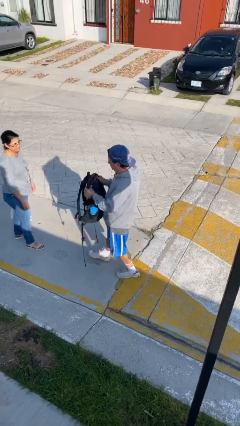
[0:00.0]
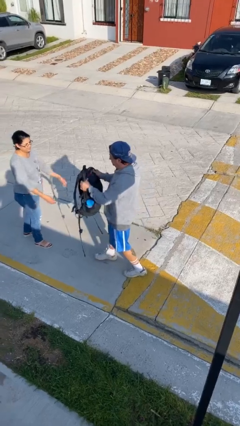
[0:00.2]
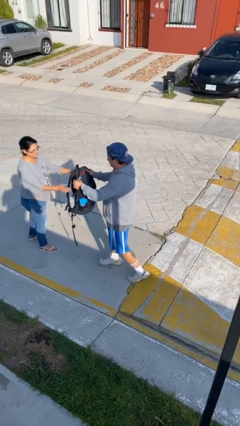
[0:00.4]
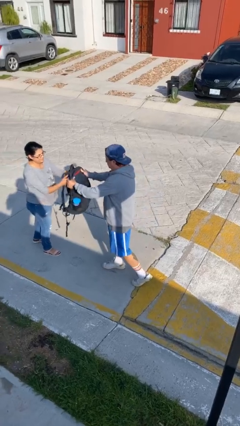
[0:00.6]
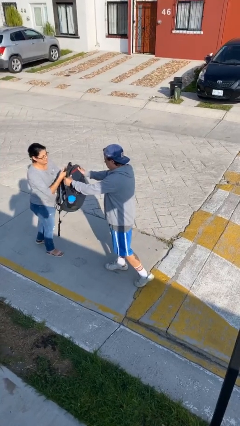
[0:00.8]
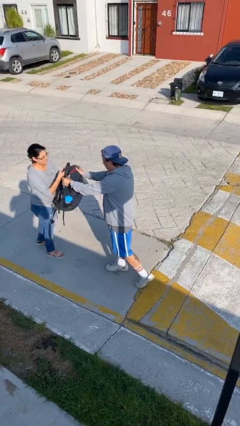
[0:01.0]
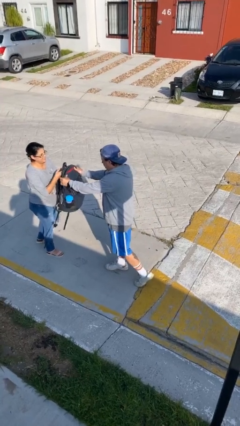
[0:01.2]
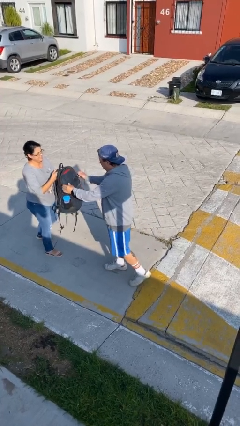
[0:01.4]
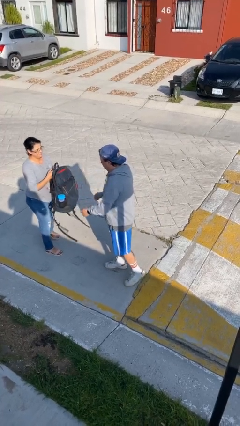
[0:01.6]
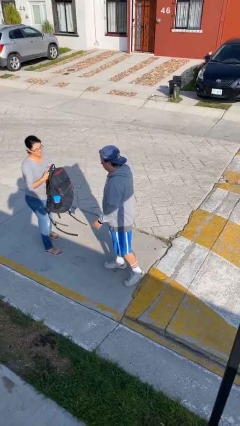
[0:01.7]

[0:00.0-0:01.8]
person transfers object to person

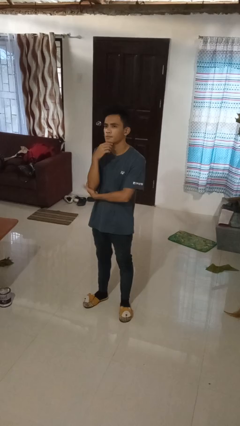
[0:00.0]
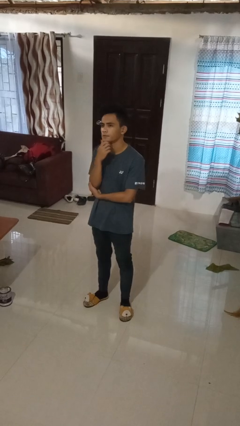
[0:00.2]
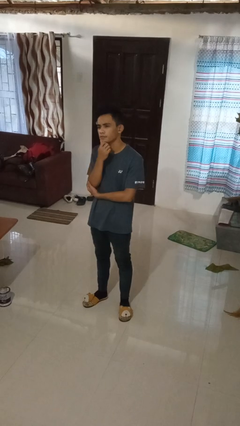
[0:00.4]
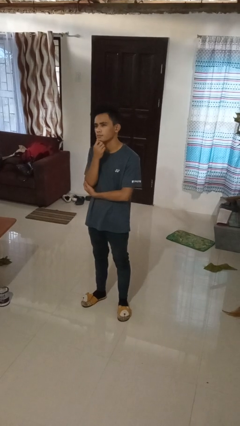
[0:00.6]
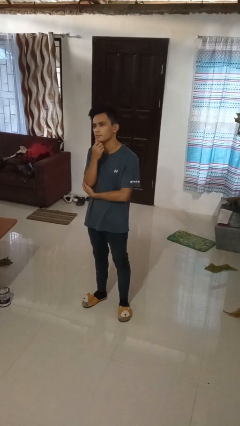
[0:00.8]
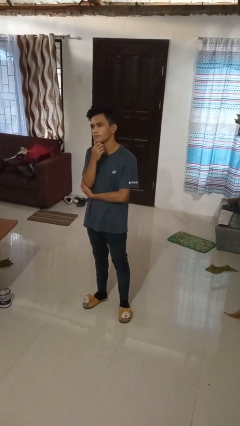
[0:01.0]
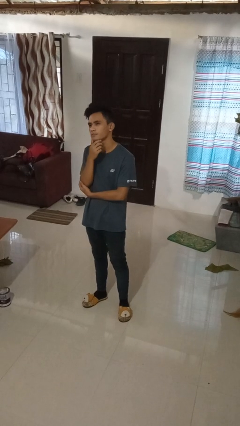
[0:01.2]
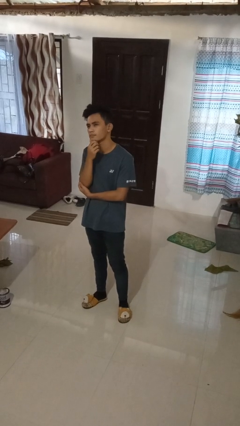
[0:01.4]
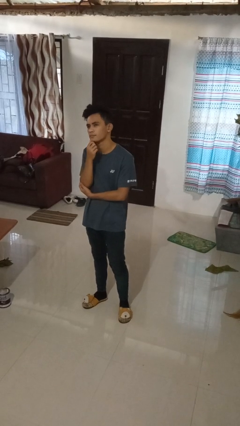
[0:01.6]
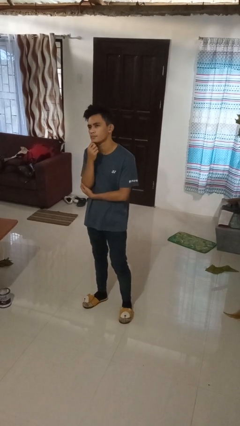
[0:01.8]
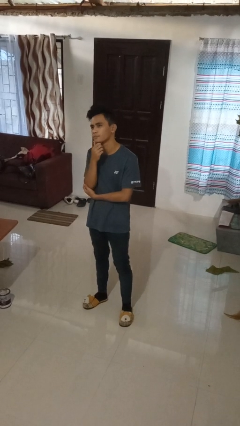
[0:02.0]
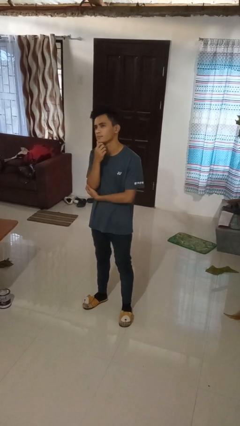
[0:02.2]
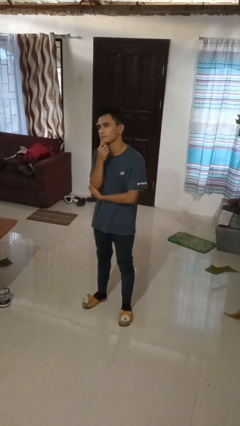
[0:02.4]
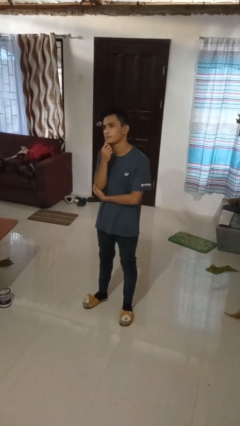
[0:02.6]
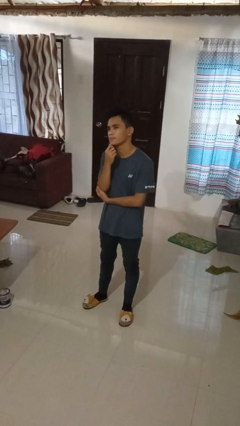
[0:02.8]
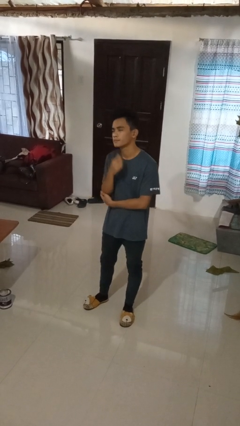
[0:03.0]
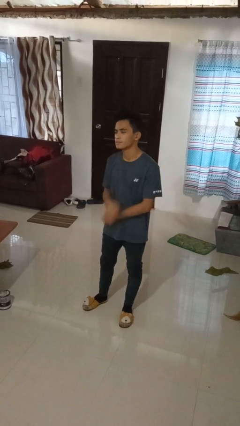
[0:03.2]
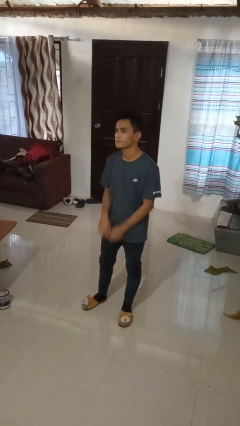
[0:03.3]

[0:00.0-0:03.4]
person strokes chin

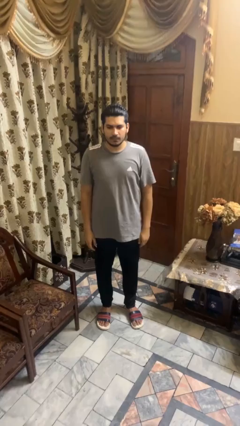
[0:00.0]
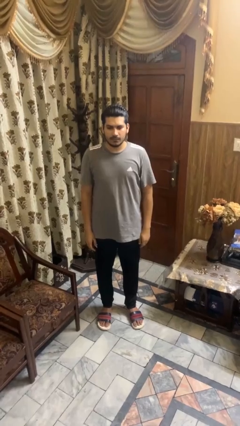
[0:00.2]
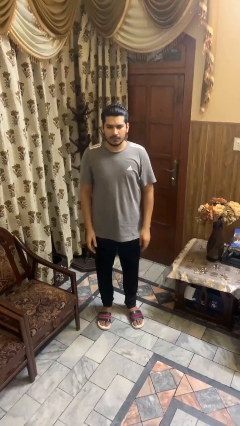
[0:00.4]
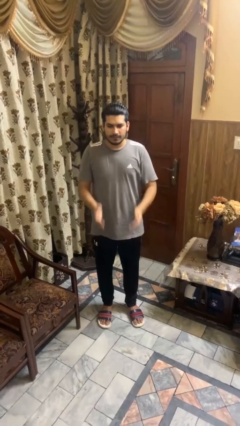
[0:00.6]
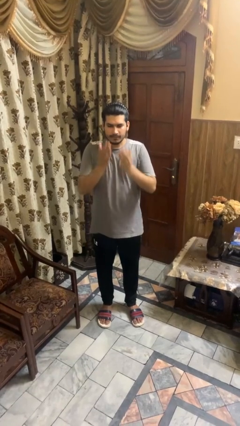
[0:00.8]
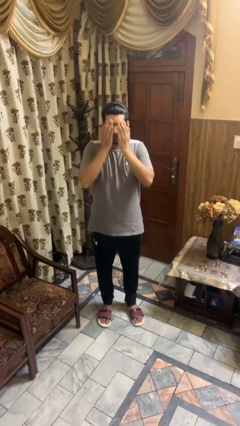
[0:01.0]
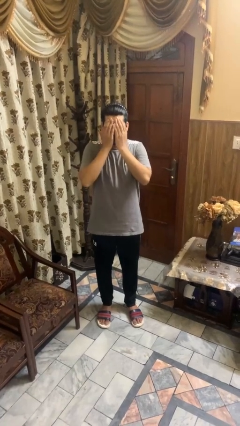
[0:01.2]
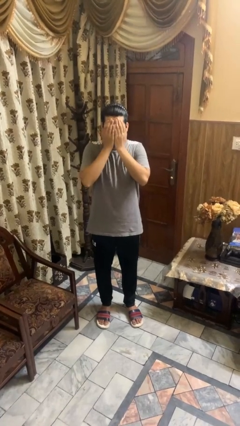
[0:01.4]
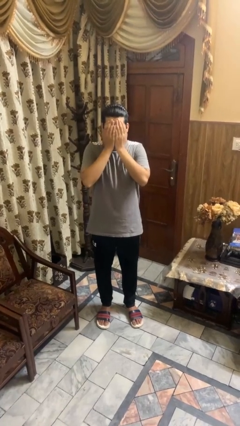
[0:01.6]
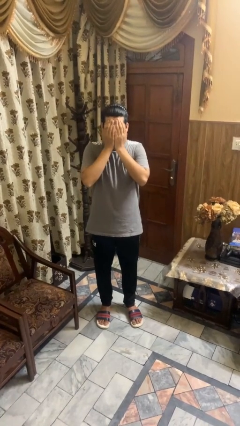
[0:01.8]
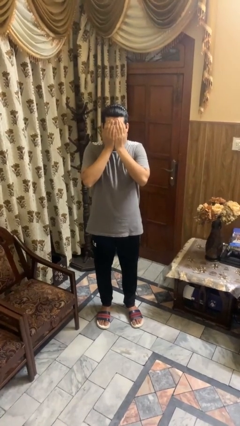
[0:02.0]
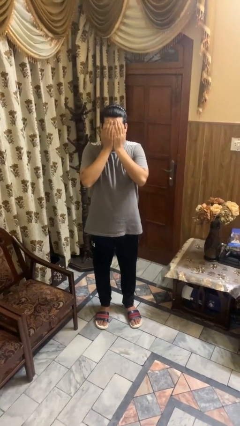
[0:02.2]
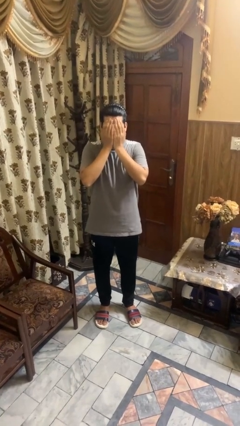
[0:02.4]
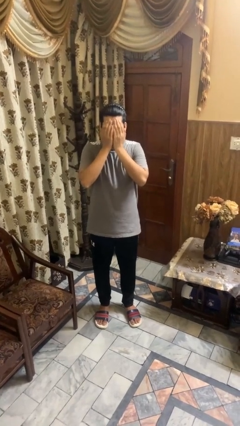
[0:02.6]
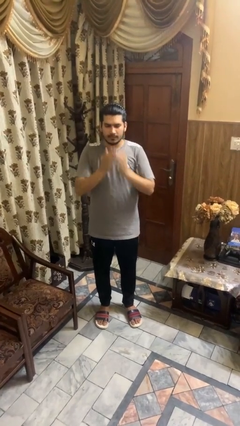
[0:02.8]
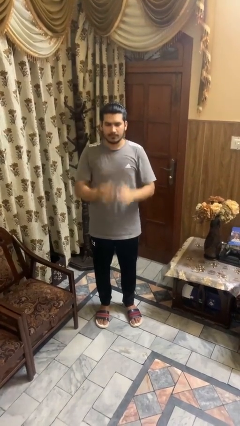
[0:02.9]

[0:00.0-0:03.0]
person covers face with hands

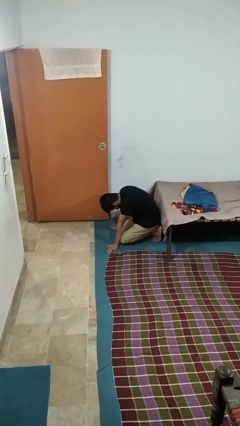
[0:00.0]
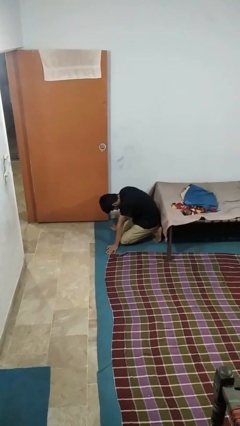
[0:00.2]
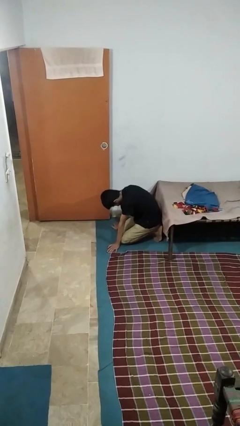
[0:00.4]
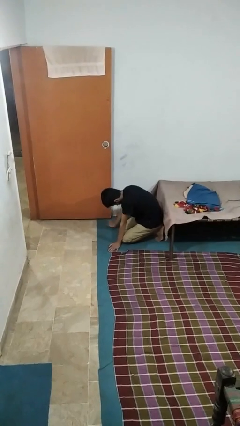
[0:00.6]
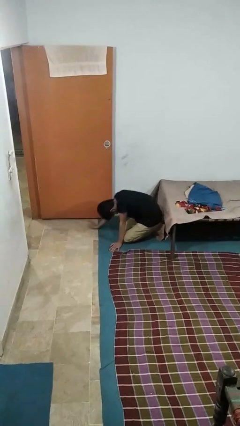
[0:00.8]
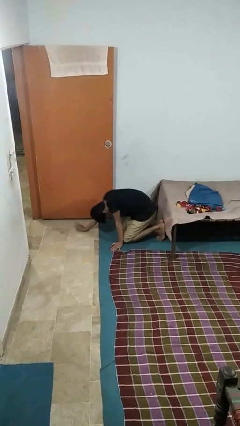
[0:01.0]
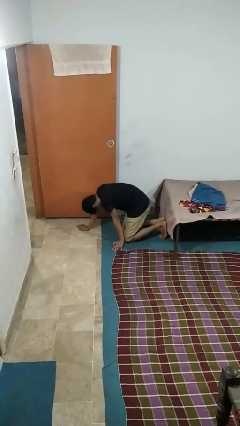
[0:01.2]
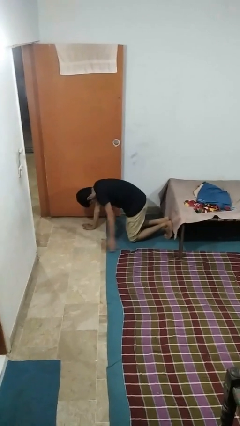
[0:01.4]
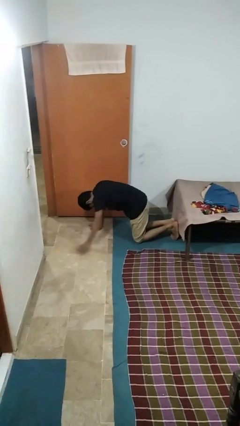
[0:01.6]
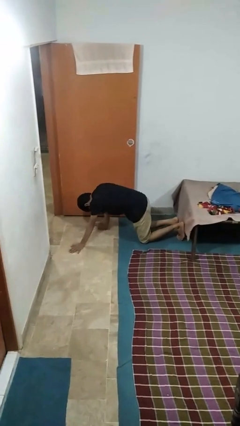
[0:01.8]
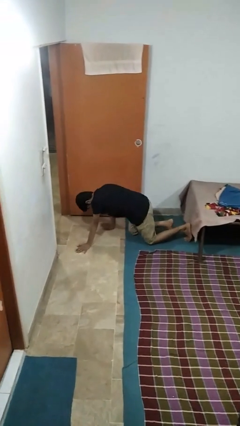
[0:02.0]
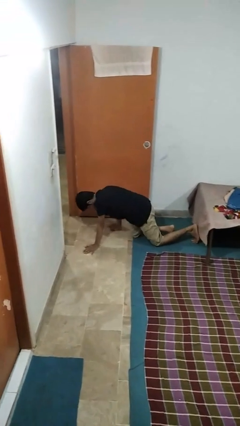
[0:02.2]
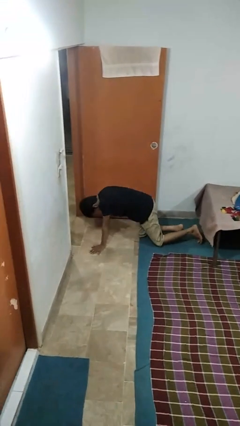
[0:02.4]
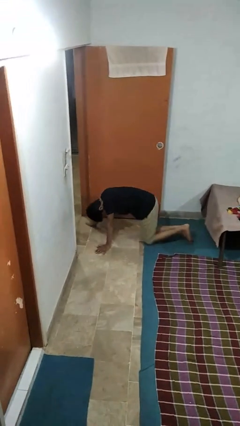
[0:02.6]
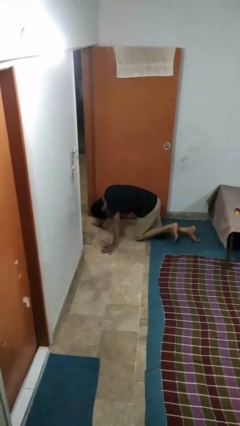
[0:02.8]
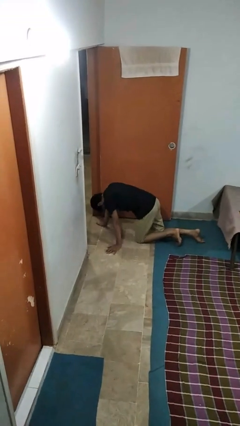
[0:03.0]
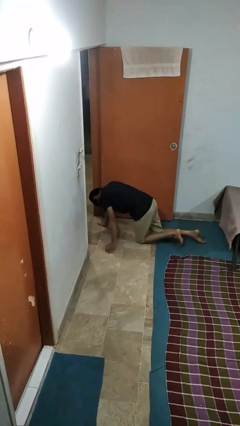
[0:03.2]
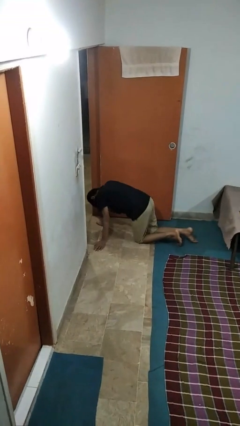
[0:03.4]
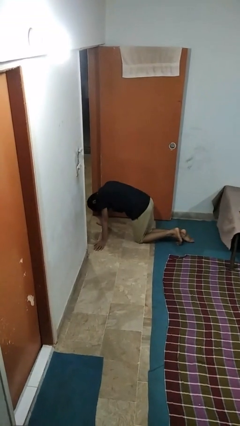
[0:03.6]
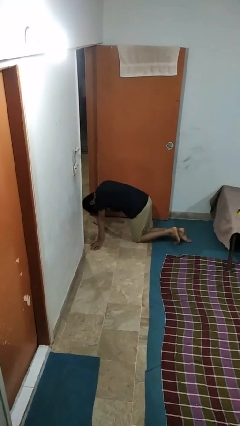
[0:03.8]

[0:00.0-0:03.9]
person crawls

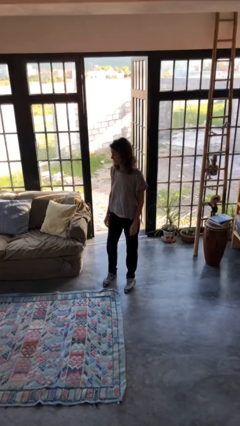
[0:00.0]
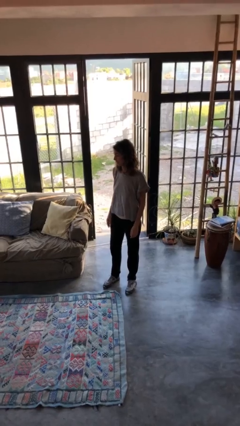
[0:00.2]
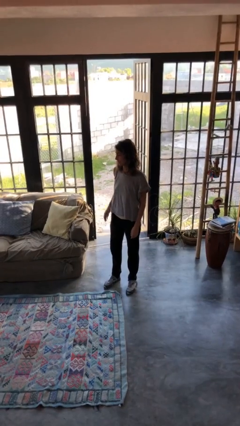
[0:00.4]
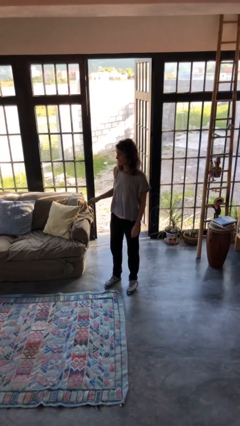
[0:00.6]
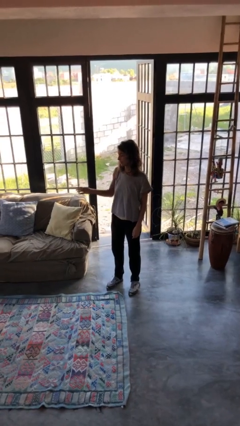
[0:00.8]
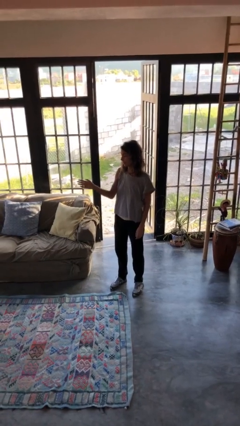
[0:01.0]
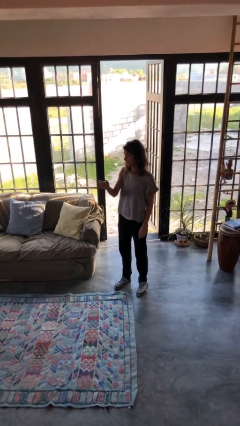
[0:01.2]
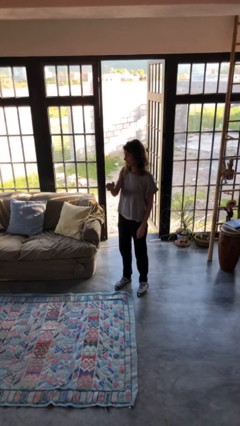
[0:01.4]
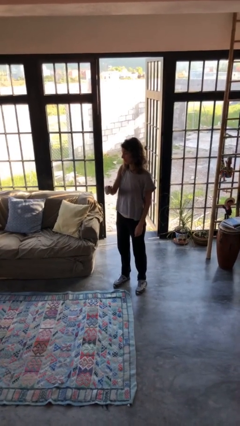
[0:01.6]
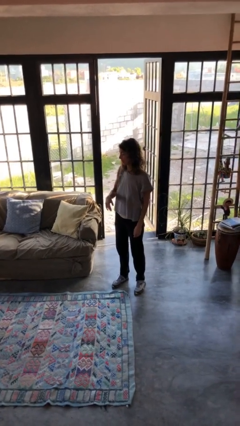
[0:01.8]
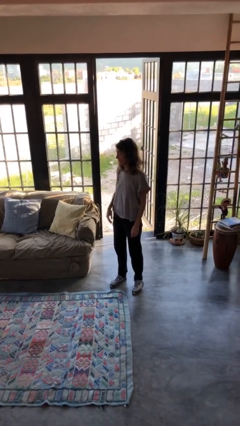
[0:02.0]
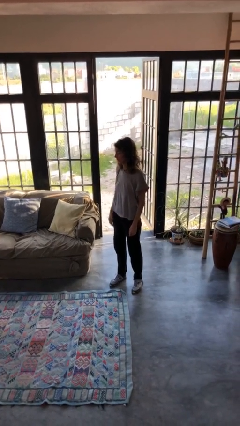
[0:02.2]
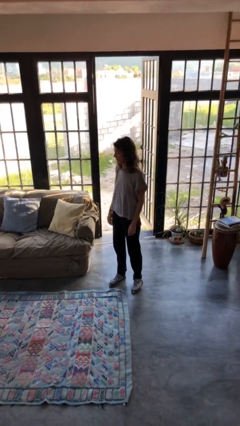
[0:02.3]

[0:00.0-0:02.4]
person gestures swipe left

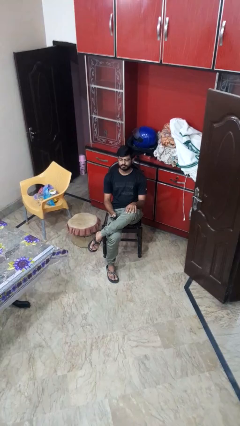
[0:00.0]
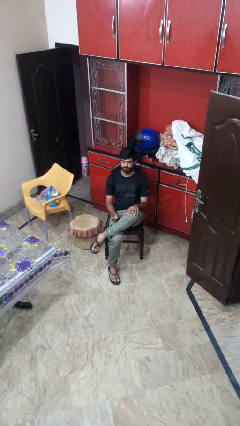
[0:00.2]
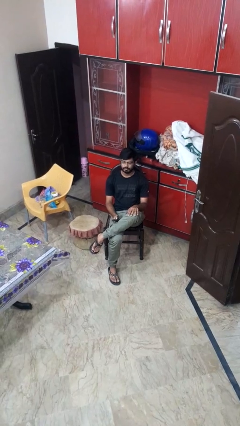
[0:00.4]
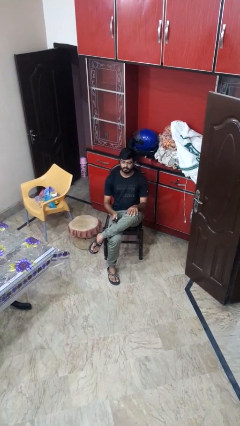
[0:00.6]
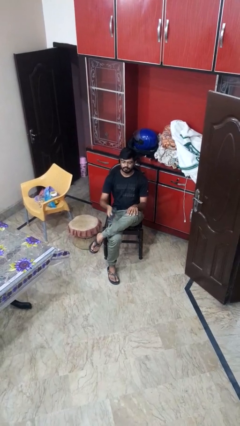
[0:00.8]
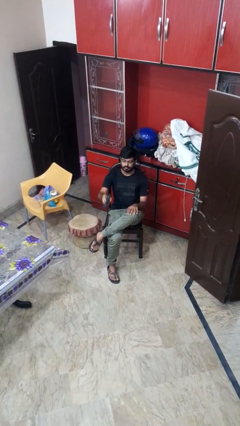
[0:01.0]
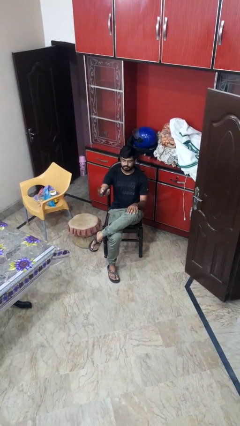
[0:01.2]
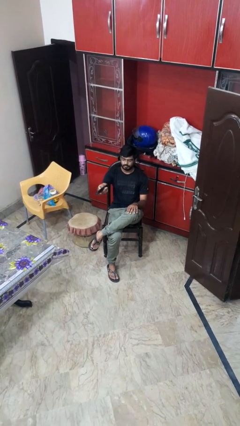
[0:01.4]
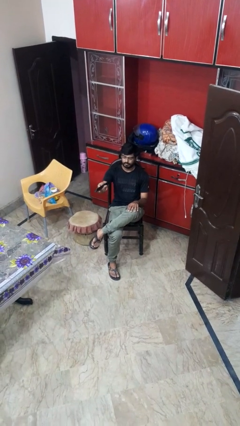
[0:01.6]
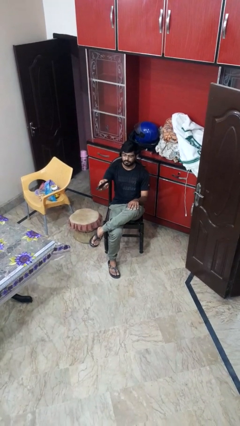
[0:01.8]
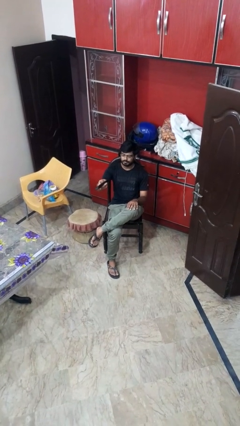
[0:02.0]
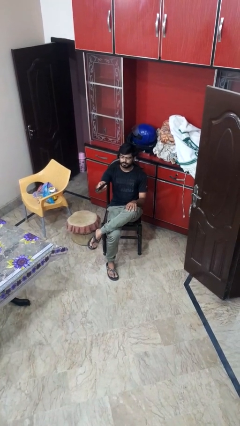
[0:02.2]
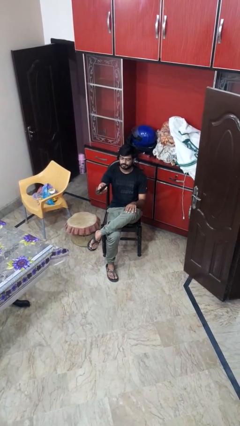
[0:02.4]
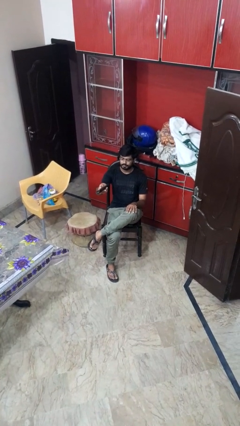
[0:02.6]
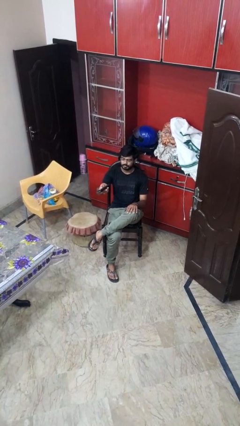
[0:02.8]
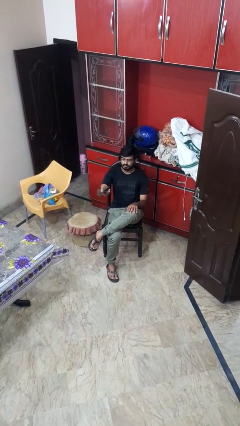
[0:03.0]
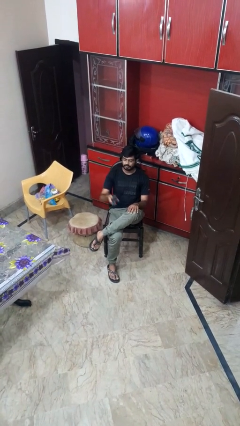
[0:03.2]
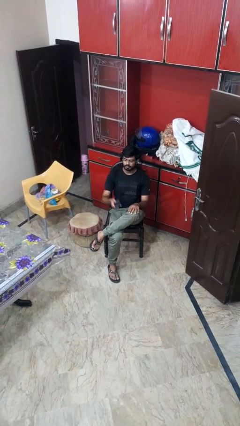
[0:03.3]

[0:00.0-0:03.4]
person uses television remote
